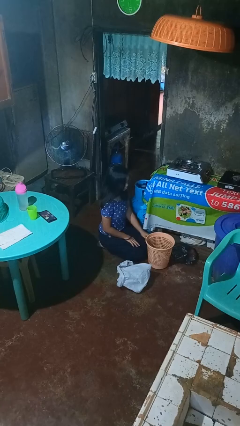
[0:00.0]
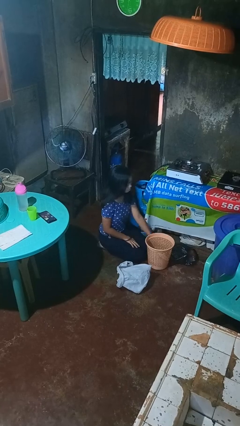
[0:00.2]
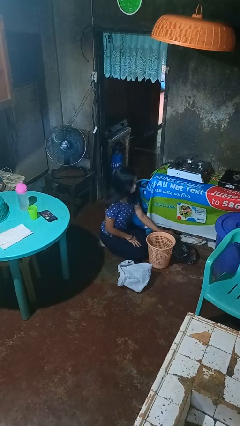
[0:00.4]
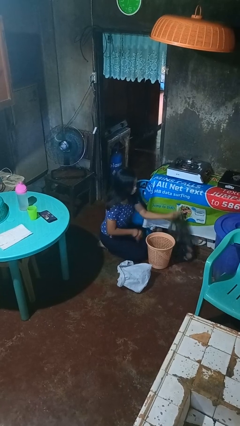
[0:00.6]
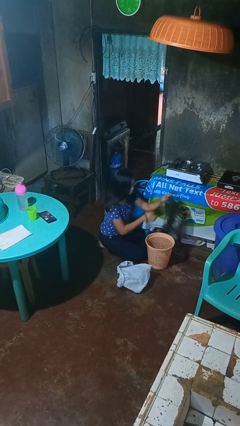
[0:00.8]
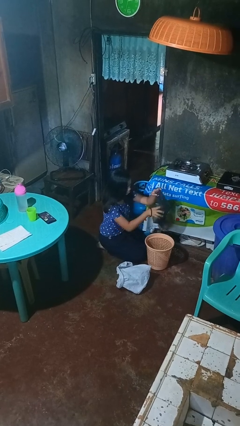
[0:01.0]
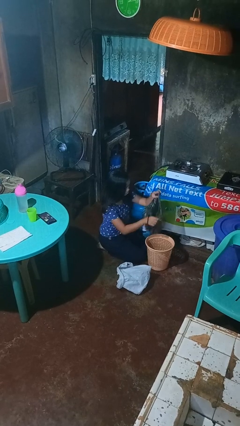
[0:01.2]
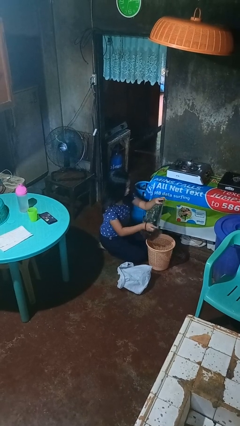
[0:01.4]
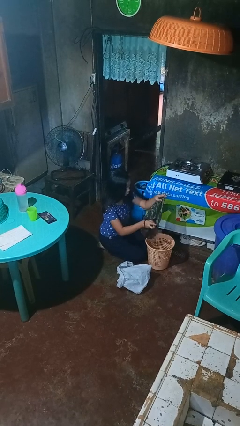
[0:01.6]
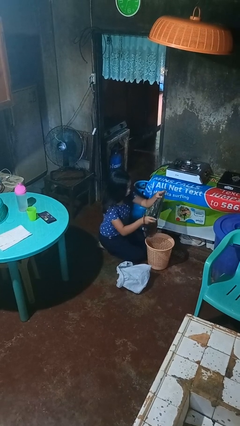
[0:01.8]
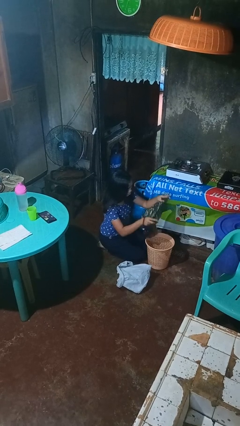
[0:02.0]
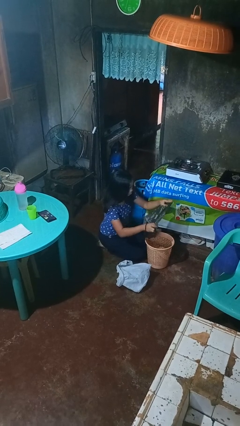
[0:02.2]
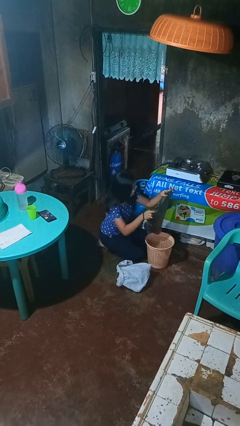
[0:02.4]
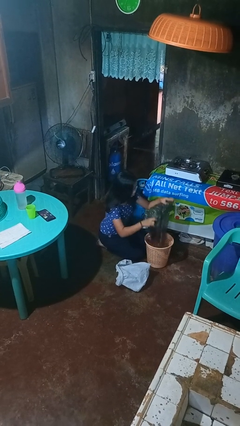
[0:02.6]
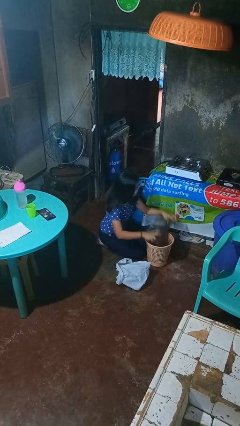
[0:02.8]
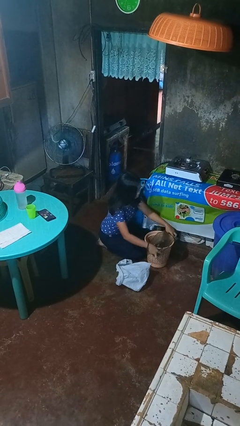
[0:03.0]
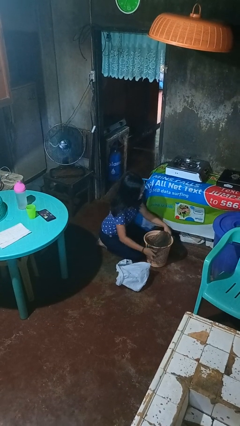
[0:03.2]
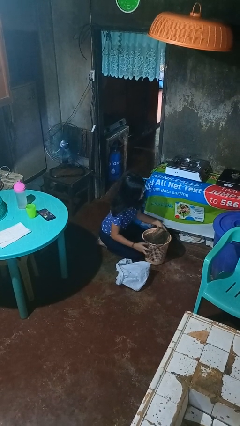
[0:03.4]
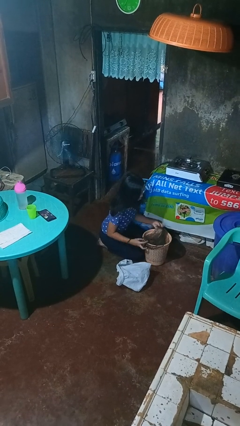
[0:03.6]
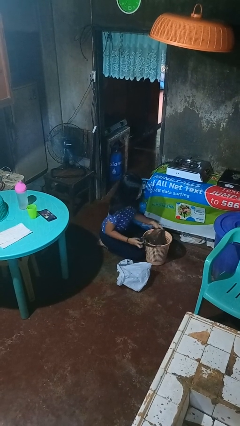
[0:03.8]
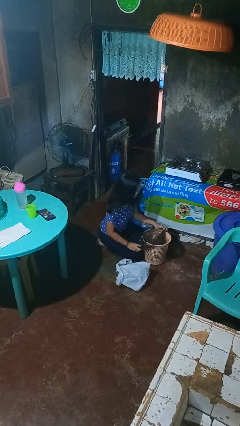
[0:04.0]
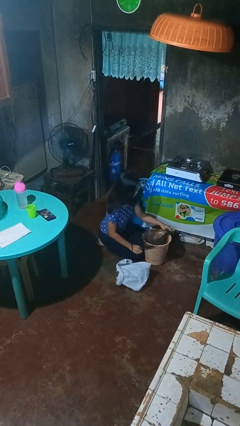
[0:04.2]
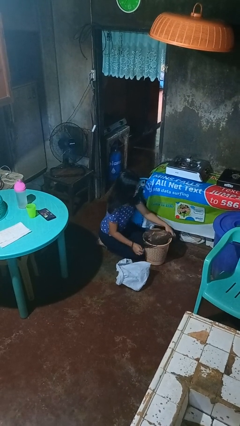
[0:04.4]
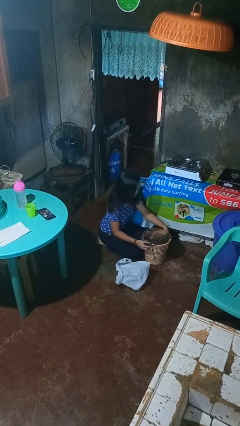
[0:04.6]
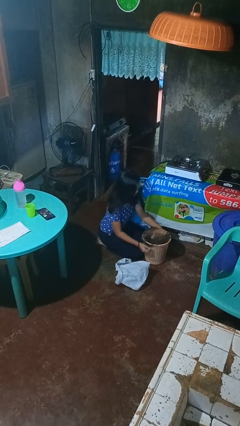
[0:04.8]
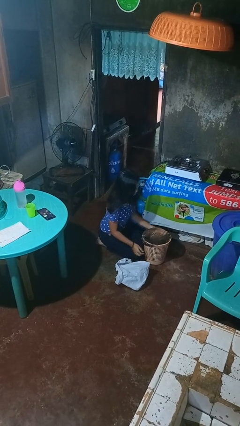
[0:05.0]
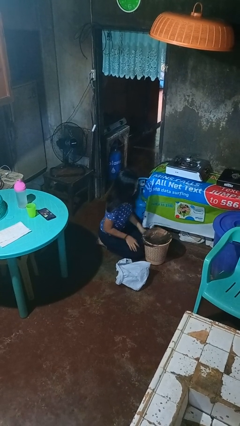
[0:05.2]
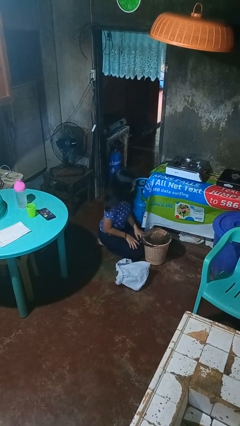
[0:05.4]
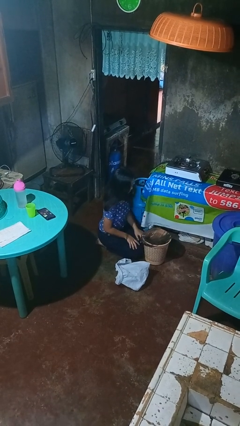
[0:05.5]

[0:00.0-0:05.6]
person inserts trashbag into trashcan

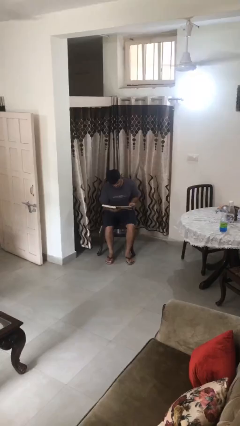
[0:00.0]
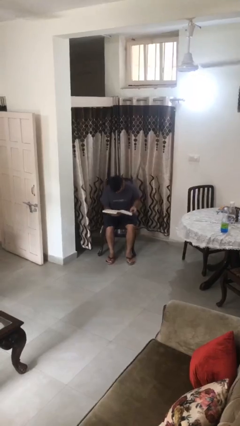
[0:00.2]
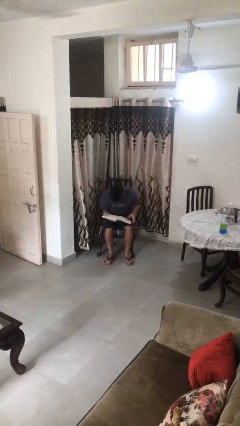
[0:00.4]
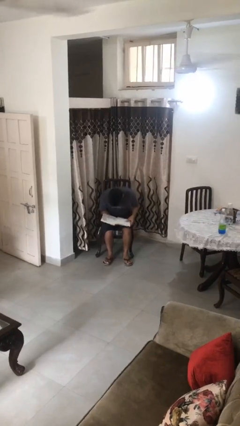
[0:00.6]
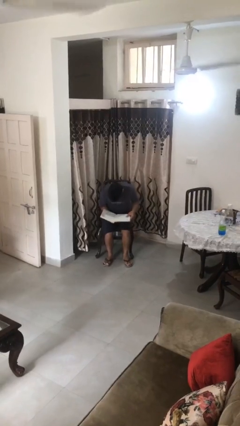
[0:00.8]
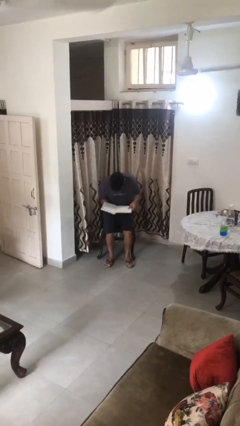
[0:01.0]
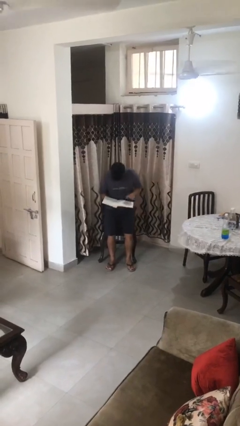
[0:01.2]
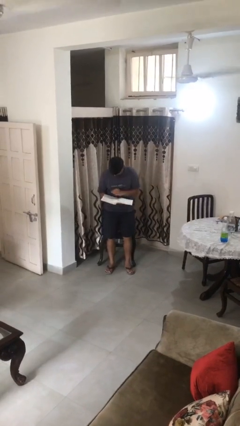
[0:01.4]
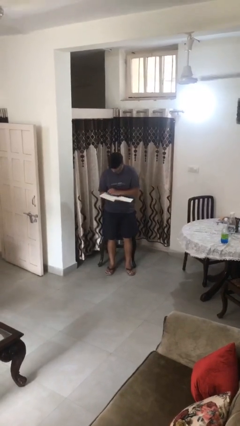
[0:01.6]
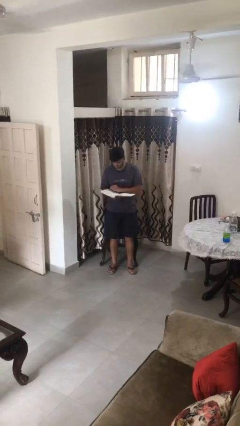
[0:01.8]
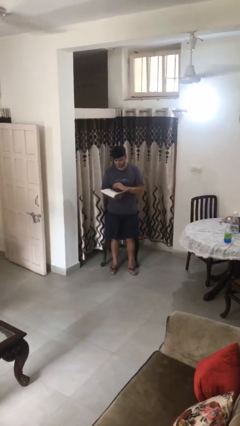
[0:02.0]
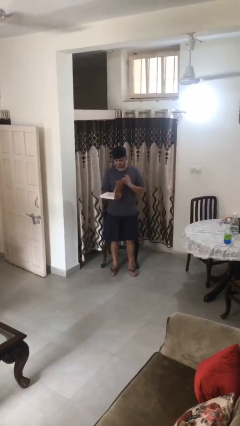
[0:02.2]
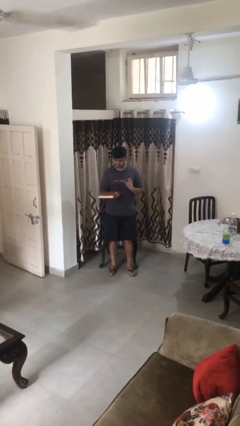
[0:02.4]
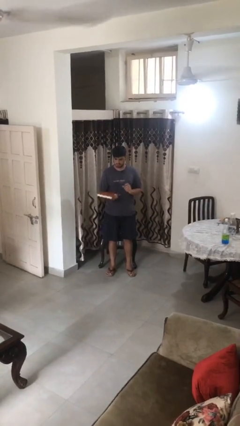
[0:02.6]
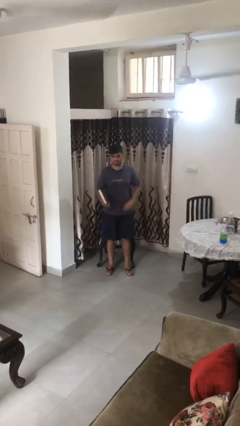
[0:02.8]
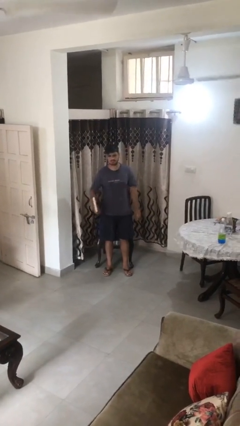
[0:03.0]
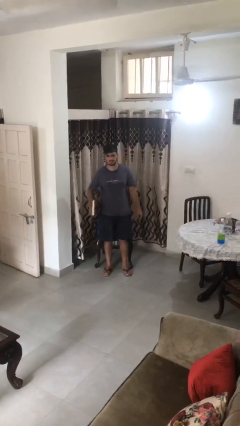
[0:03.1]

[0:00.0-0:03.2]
person stands up

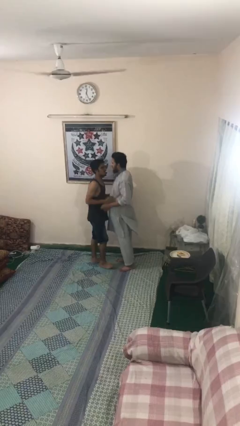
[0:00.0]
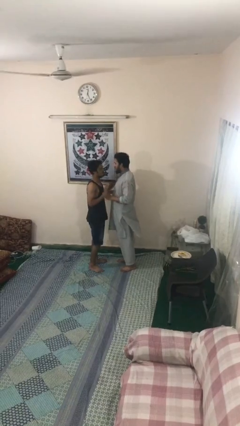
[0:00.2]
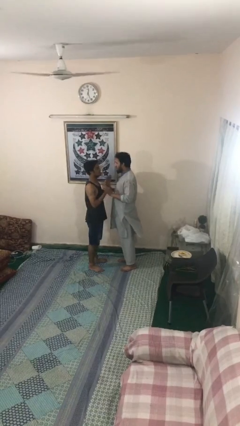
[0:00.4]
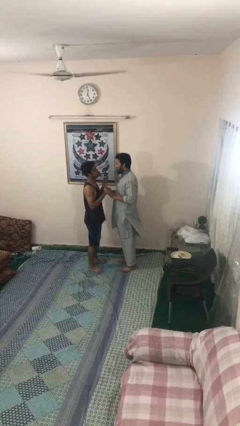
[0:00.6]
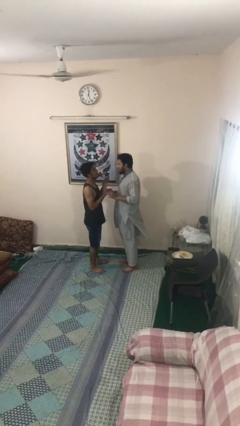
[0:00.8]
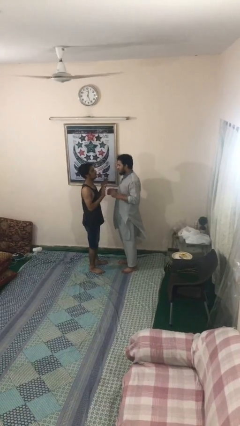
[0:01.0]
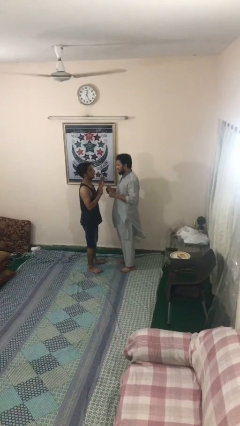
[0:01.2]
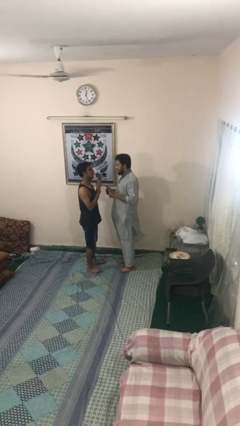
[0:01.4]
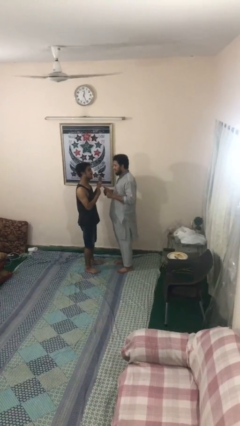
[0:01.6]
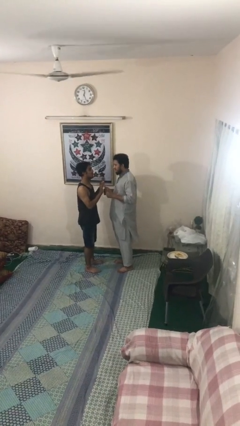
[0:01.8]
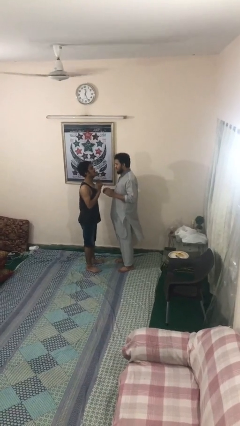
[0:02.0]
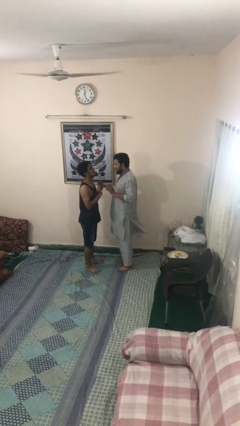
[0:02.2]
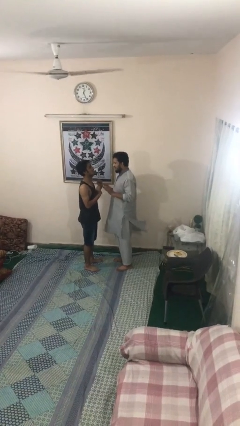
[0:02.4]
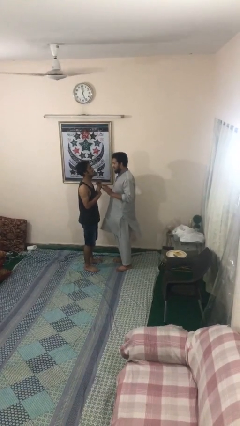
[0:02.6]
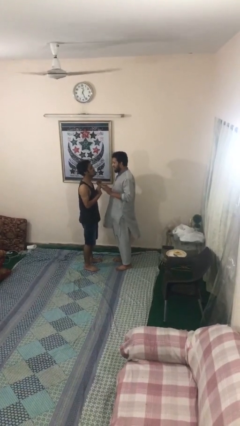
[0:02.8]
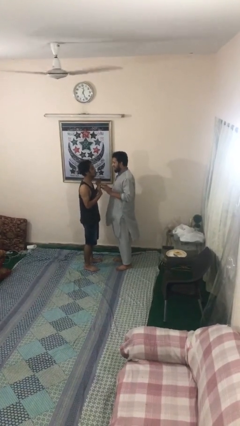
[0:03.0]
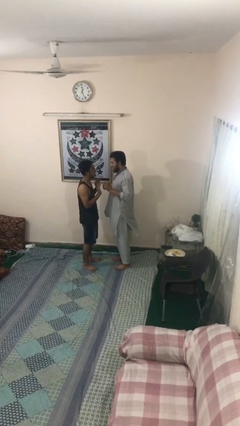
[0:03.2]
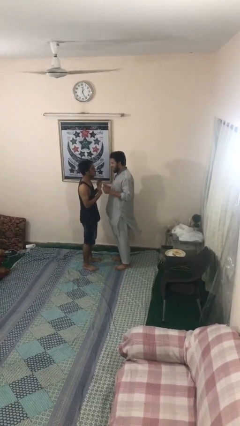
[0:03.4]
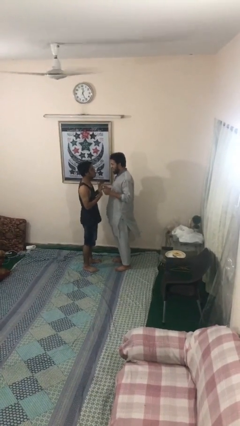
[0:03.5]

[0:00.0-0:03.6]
person talks to person

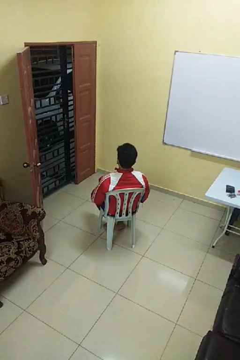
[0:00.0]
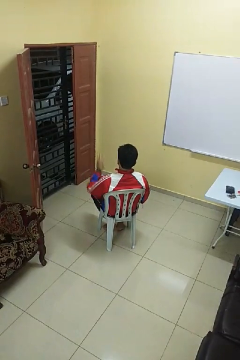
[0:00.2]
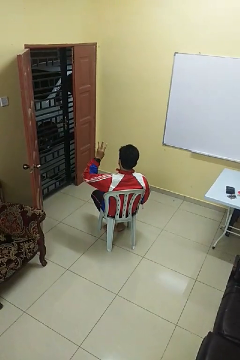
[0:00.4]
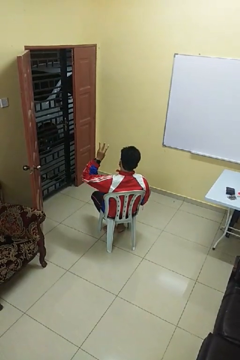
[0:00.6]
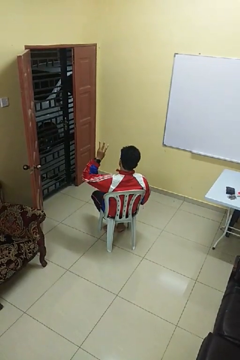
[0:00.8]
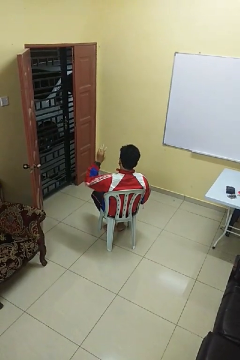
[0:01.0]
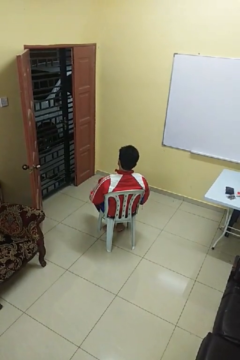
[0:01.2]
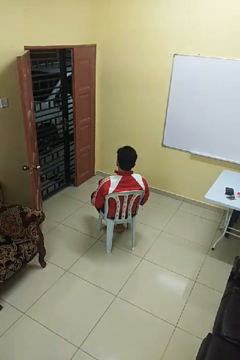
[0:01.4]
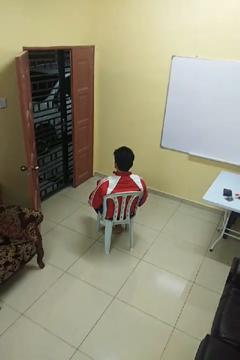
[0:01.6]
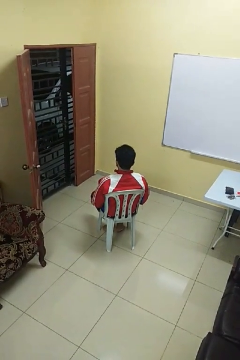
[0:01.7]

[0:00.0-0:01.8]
person gestures number three

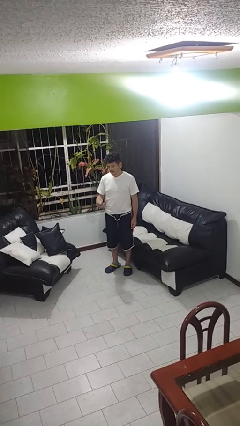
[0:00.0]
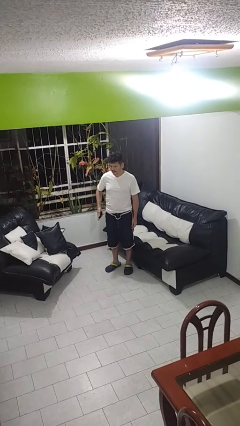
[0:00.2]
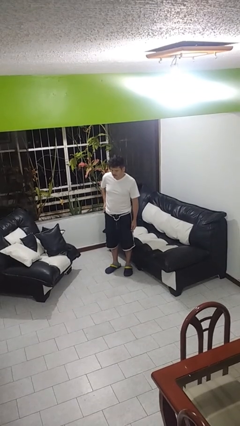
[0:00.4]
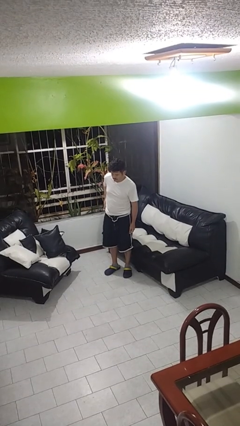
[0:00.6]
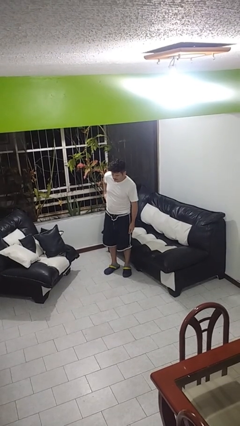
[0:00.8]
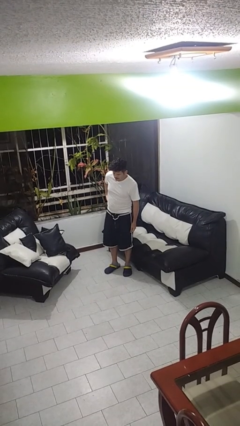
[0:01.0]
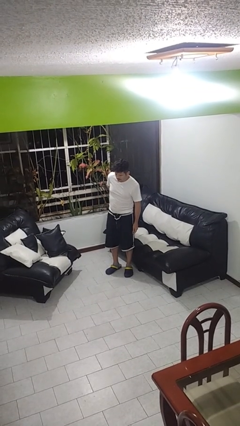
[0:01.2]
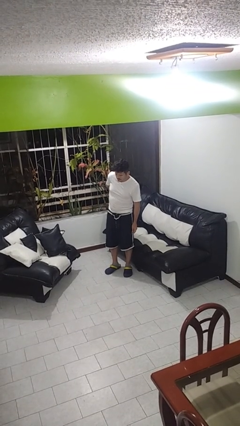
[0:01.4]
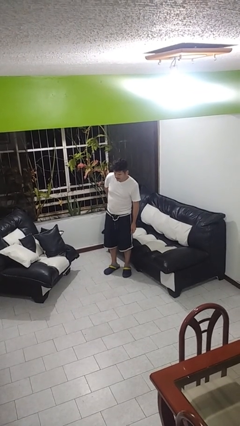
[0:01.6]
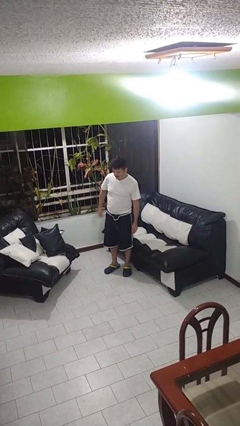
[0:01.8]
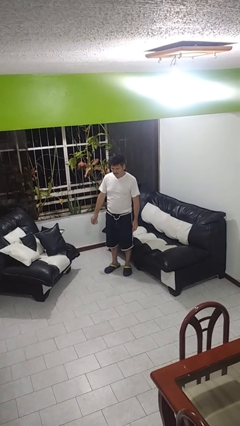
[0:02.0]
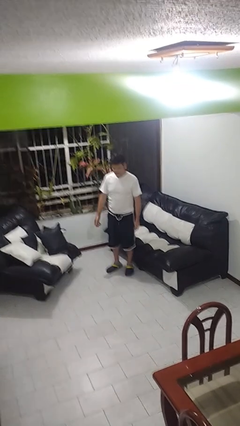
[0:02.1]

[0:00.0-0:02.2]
person puts phone into pocket

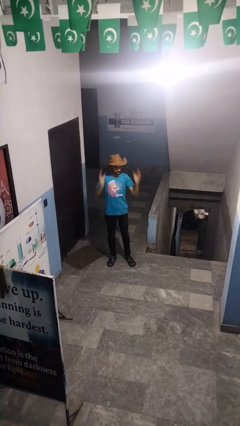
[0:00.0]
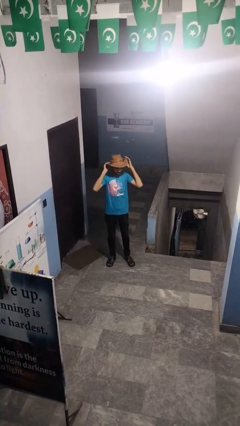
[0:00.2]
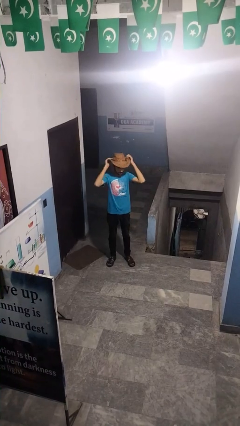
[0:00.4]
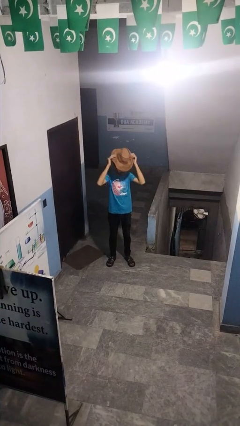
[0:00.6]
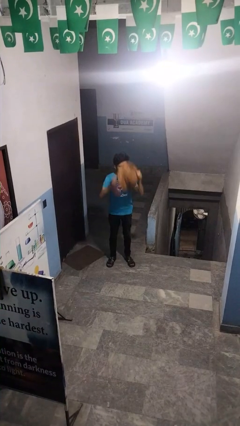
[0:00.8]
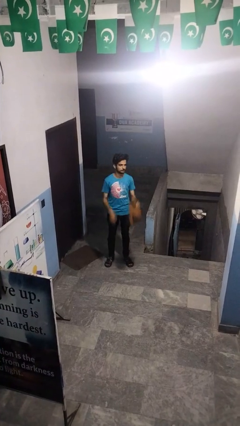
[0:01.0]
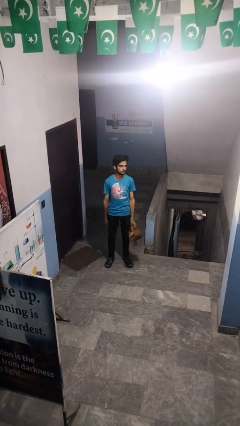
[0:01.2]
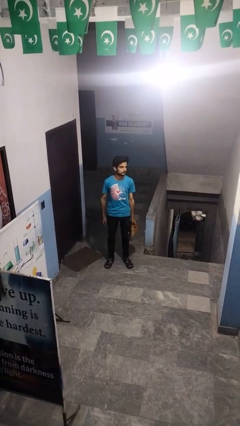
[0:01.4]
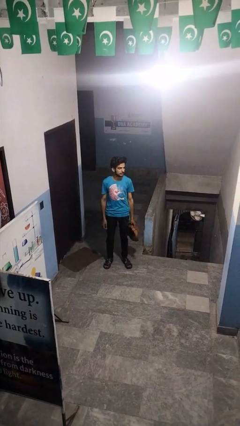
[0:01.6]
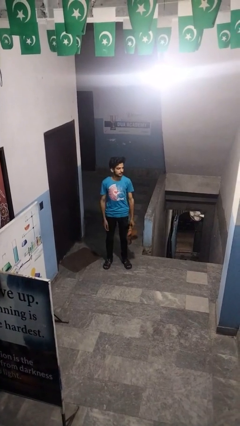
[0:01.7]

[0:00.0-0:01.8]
person takes off hat
